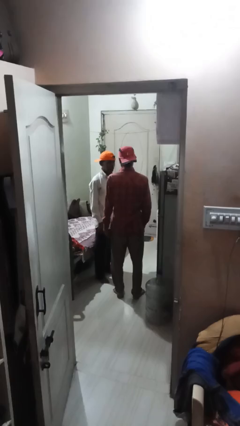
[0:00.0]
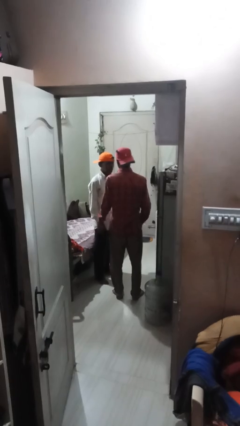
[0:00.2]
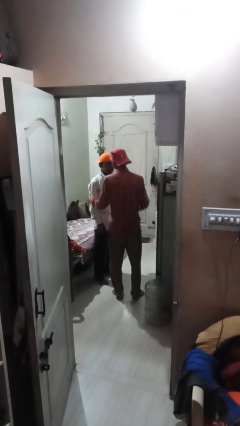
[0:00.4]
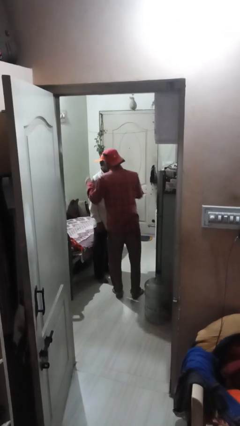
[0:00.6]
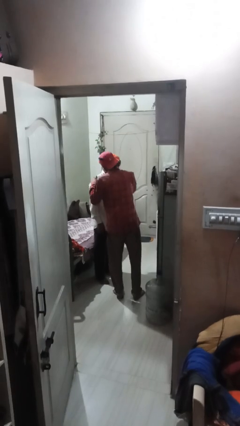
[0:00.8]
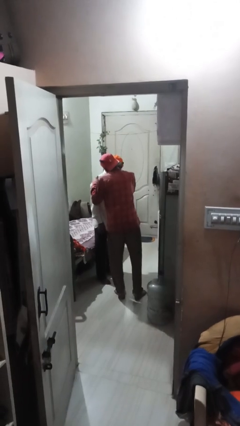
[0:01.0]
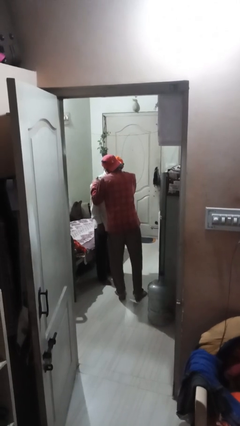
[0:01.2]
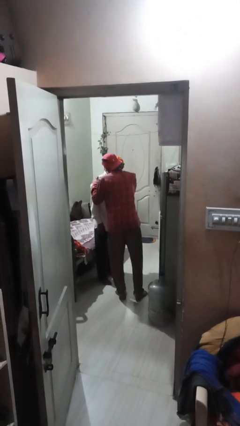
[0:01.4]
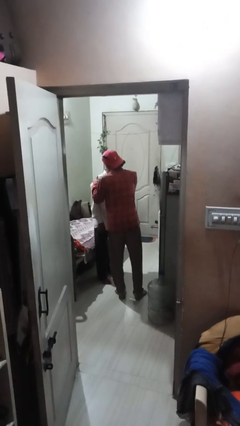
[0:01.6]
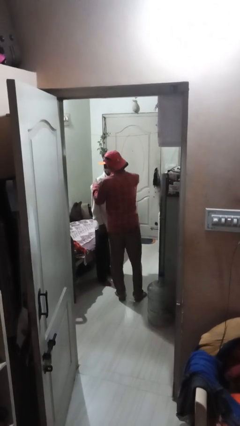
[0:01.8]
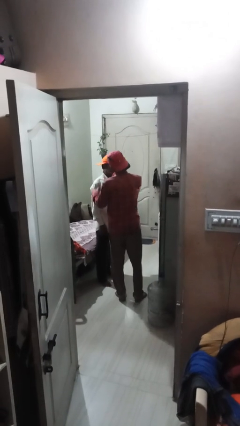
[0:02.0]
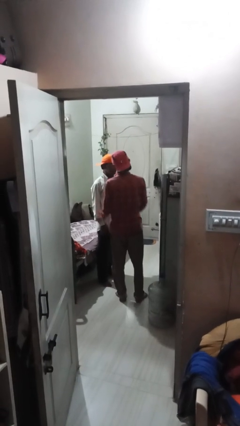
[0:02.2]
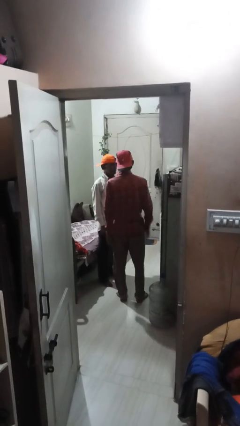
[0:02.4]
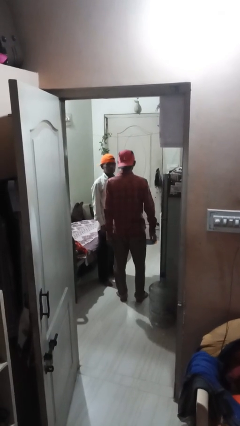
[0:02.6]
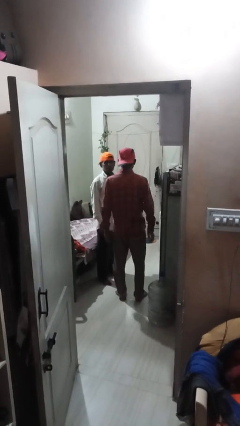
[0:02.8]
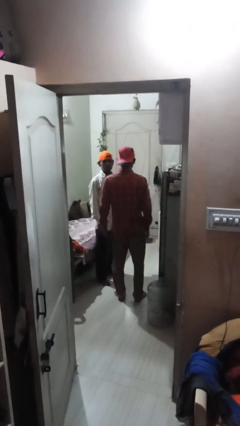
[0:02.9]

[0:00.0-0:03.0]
person kisses cheek of person

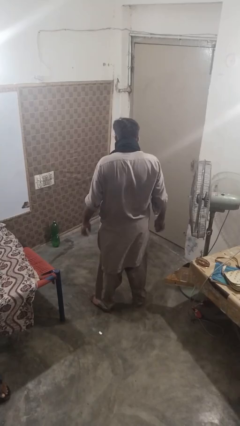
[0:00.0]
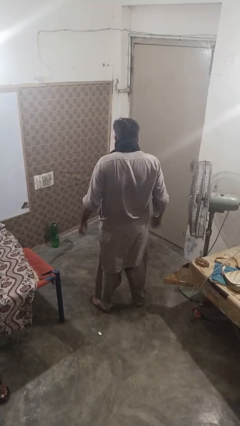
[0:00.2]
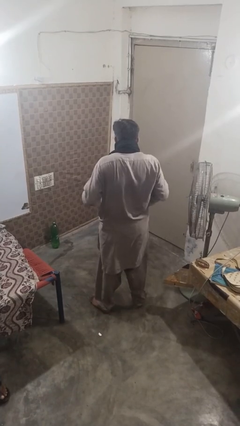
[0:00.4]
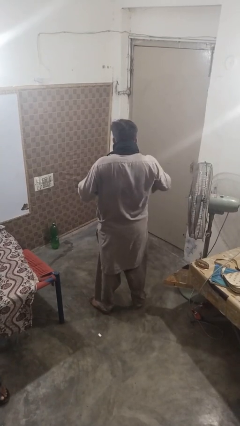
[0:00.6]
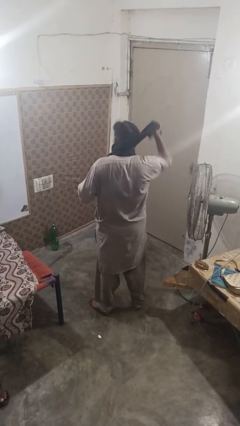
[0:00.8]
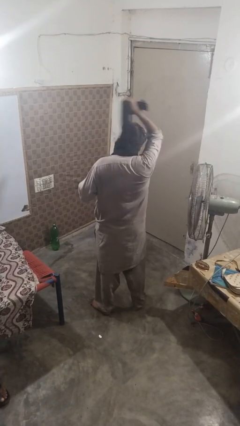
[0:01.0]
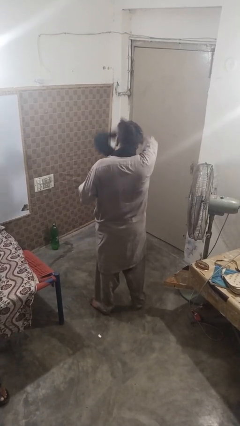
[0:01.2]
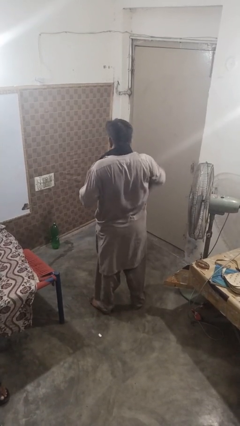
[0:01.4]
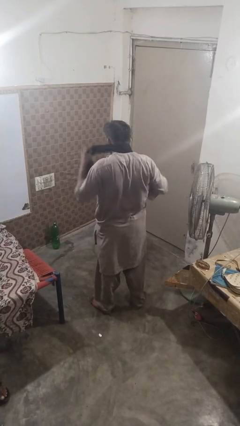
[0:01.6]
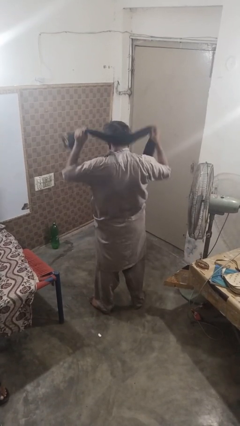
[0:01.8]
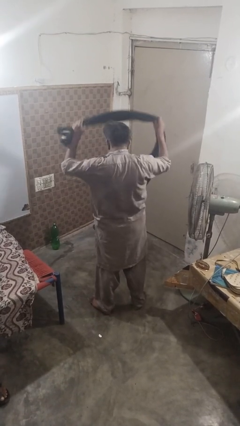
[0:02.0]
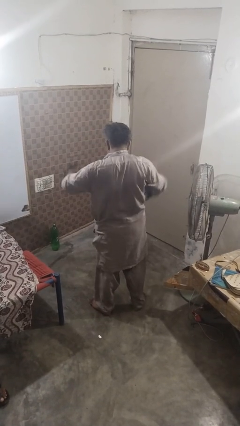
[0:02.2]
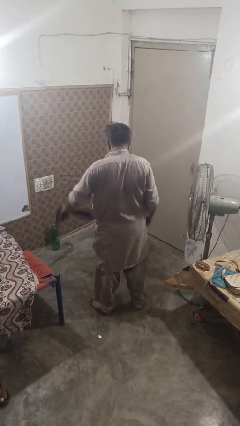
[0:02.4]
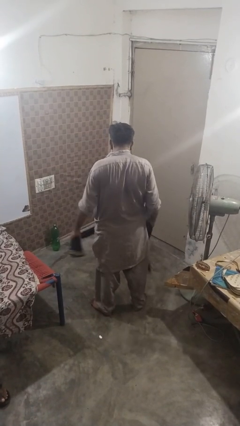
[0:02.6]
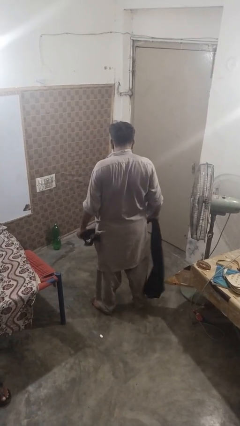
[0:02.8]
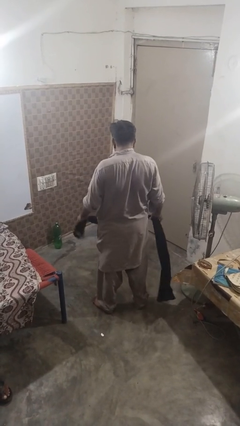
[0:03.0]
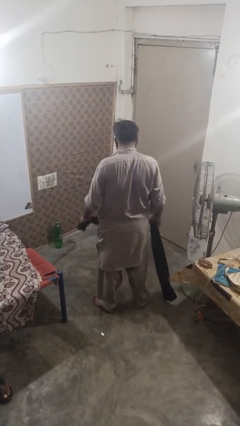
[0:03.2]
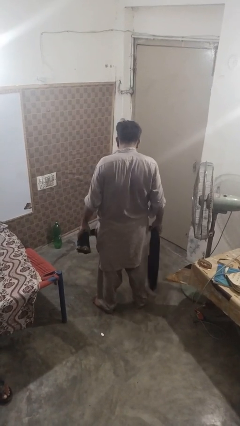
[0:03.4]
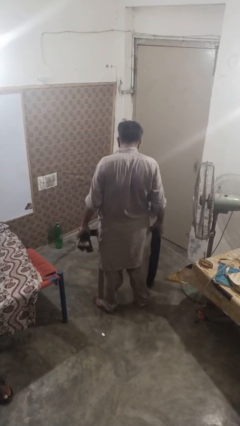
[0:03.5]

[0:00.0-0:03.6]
person takes off scarf

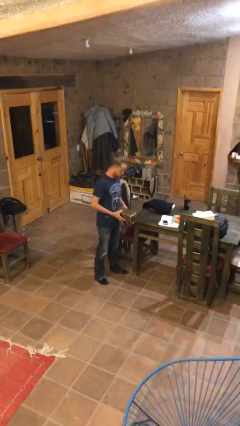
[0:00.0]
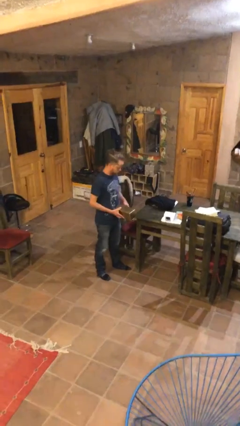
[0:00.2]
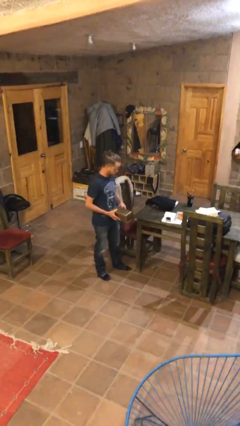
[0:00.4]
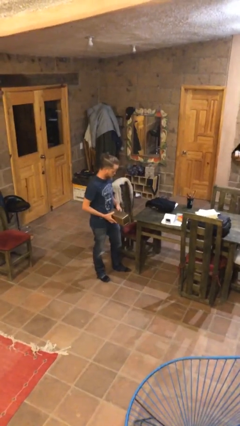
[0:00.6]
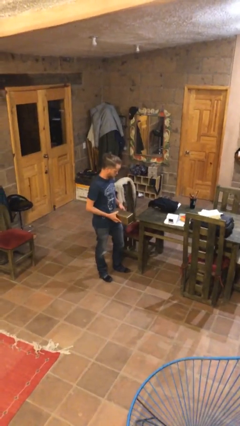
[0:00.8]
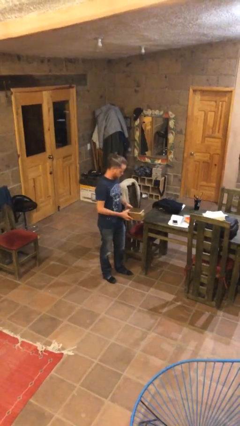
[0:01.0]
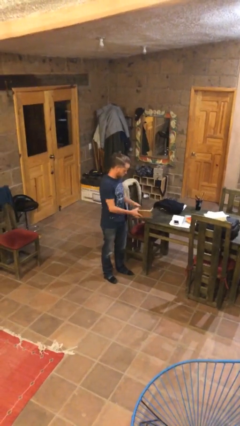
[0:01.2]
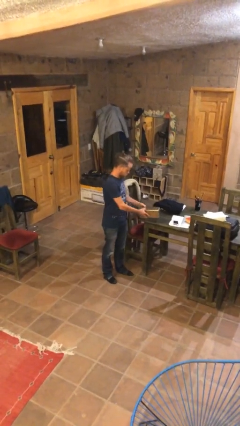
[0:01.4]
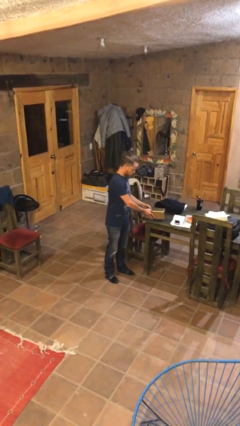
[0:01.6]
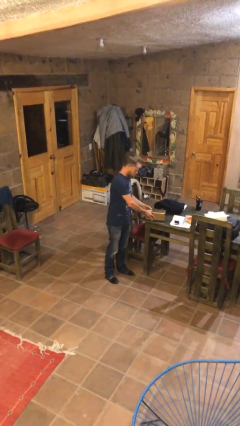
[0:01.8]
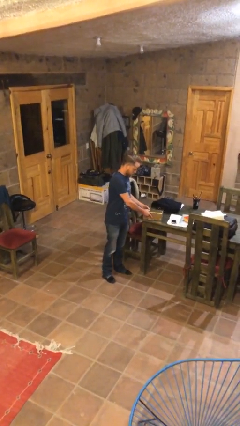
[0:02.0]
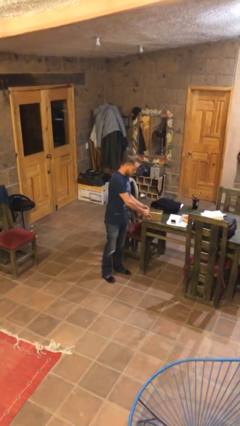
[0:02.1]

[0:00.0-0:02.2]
person puts down object on table

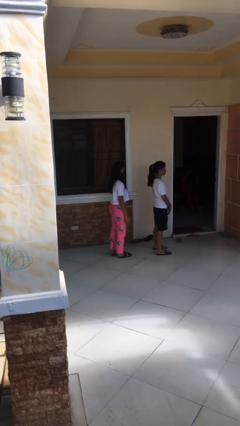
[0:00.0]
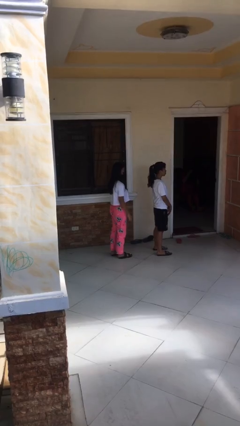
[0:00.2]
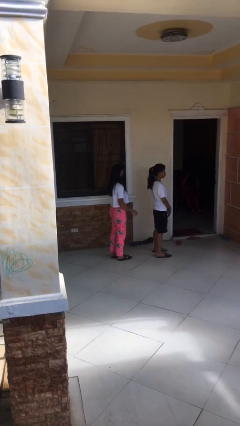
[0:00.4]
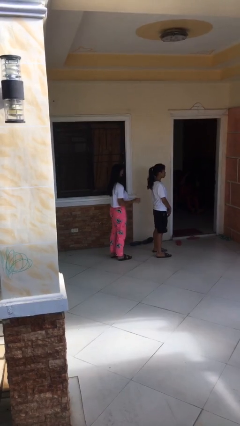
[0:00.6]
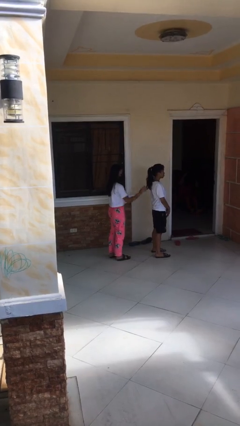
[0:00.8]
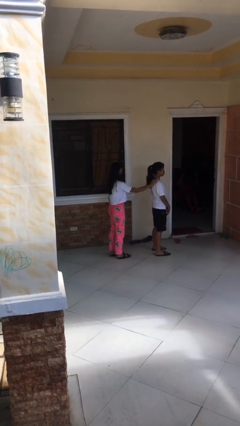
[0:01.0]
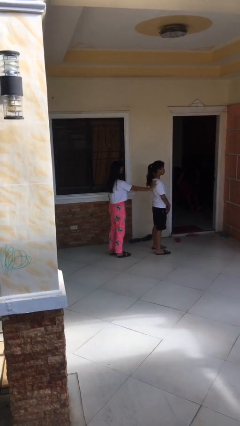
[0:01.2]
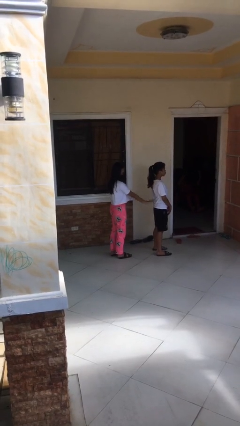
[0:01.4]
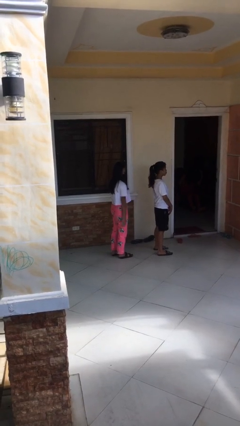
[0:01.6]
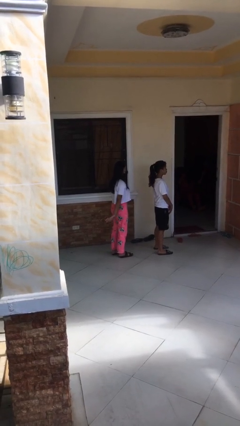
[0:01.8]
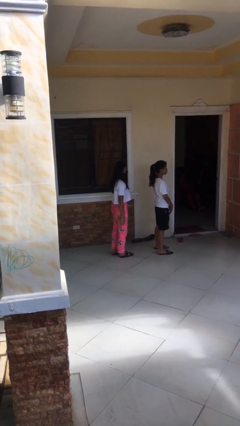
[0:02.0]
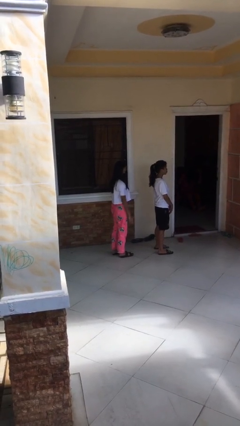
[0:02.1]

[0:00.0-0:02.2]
person touches back of person

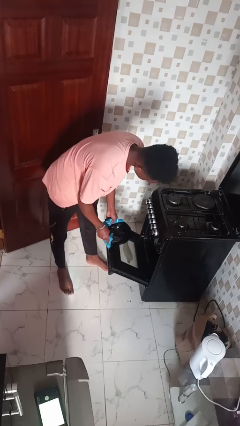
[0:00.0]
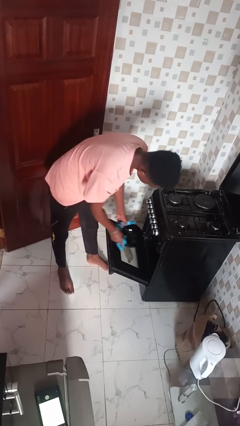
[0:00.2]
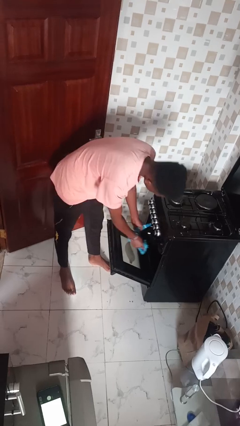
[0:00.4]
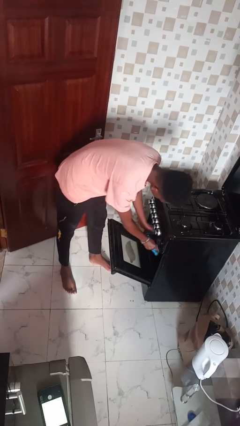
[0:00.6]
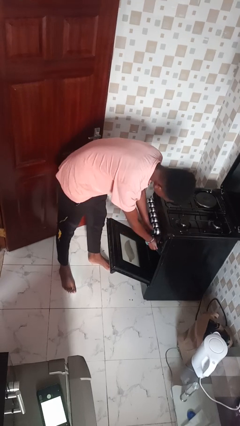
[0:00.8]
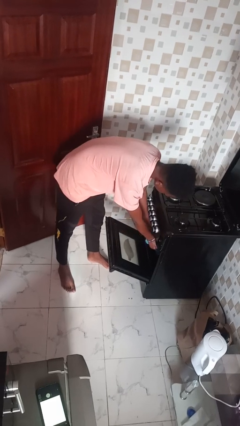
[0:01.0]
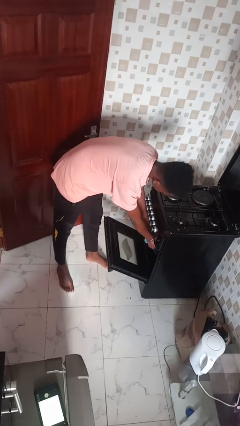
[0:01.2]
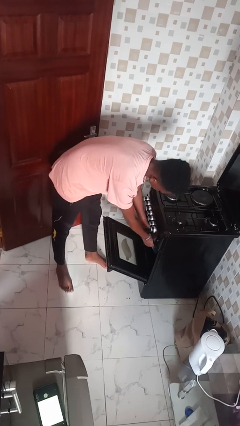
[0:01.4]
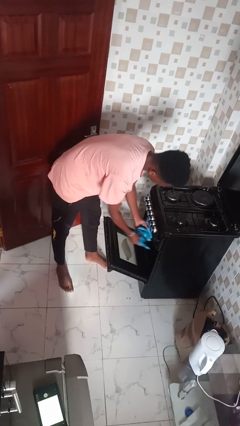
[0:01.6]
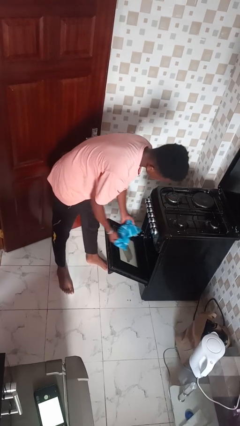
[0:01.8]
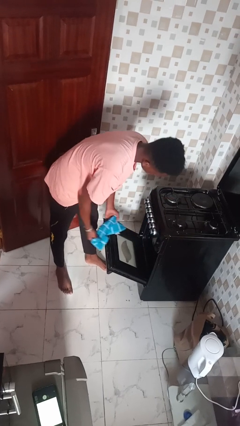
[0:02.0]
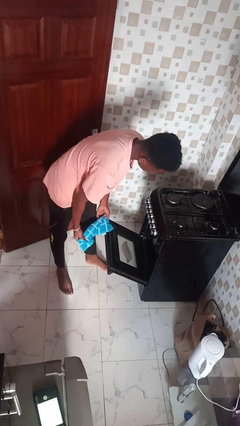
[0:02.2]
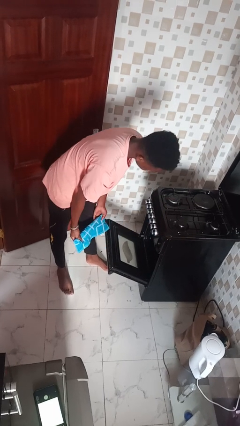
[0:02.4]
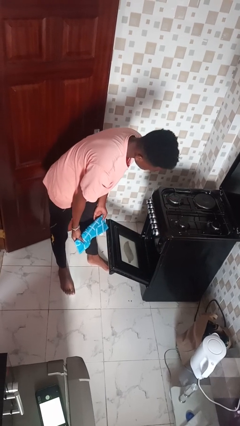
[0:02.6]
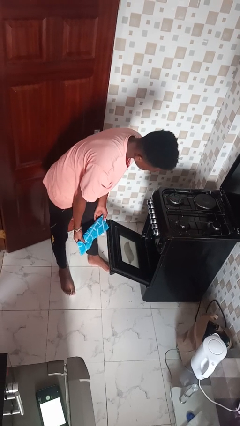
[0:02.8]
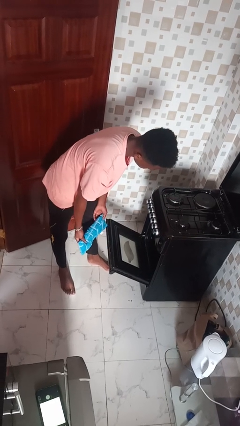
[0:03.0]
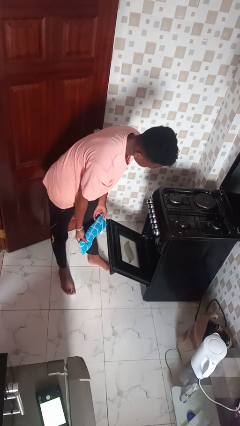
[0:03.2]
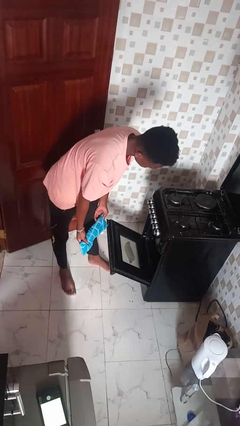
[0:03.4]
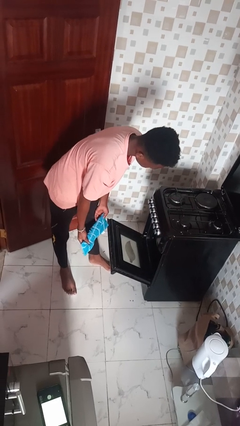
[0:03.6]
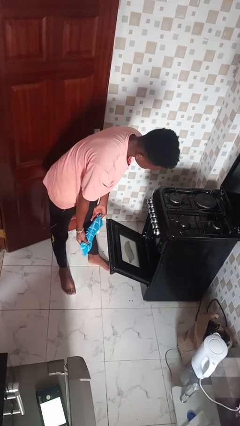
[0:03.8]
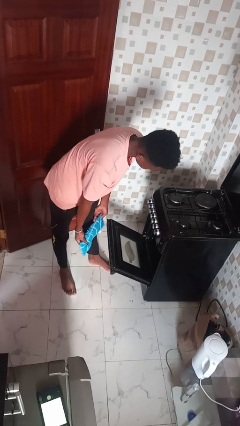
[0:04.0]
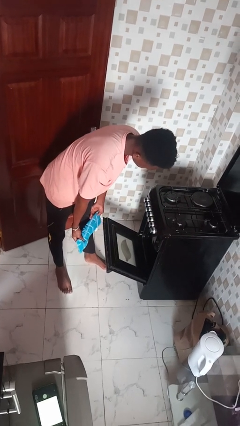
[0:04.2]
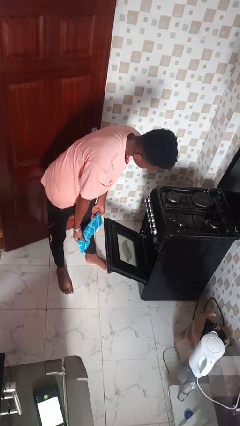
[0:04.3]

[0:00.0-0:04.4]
person puts object into oven

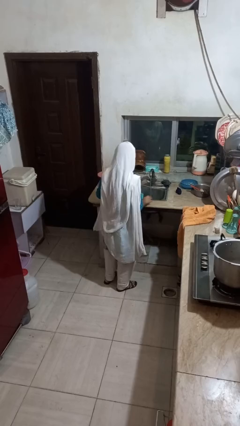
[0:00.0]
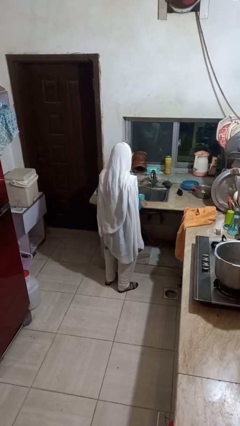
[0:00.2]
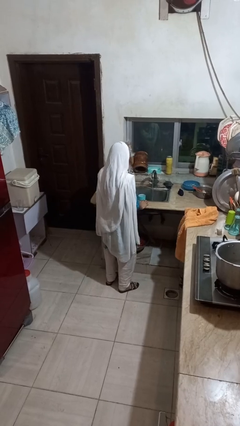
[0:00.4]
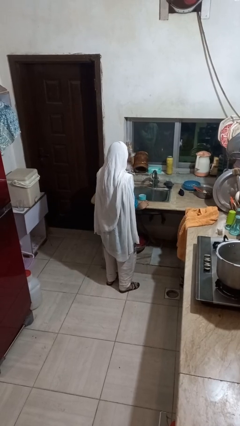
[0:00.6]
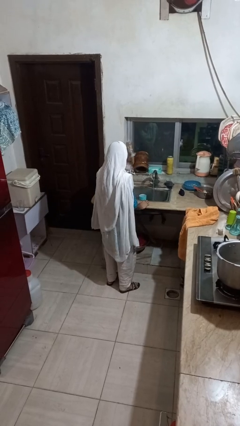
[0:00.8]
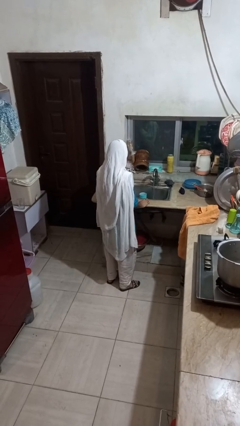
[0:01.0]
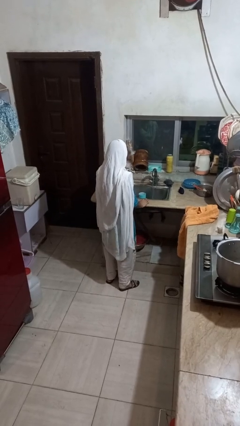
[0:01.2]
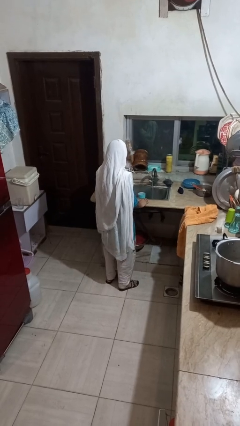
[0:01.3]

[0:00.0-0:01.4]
person dries hands with towel

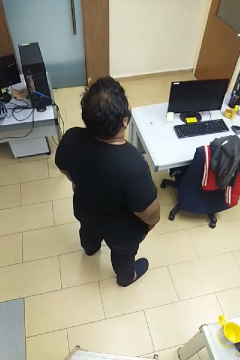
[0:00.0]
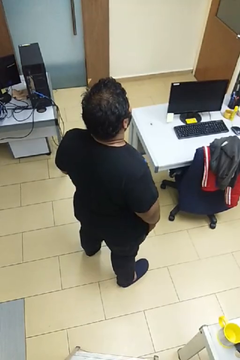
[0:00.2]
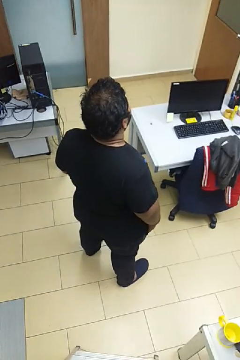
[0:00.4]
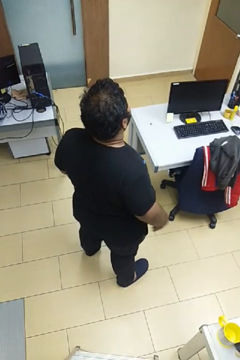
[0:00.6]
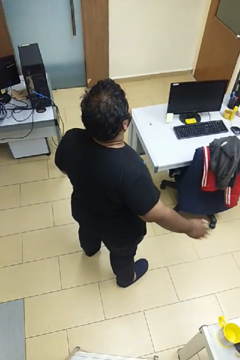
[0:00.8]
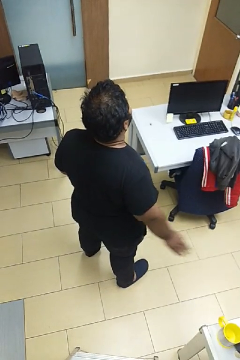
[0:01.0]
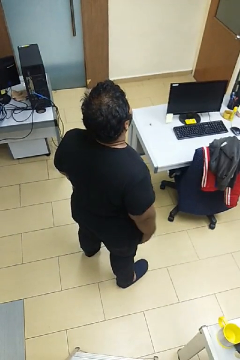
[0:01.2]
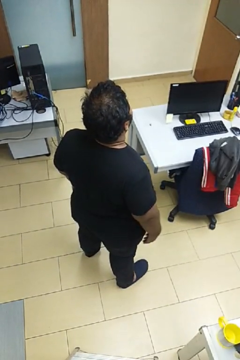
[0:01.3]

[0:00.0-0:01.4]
person slaps hands on thighs
